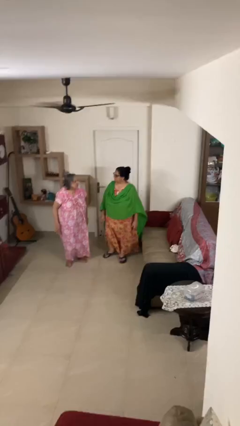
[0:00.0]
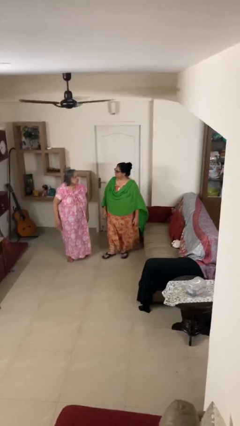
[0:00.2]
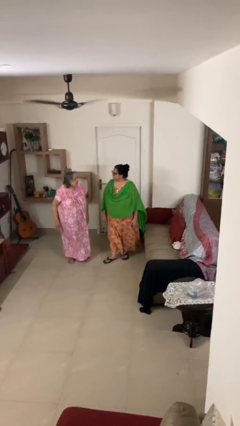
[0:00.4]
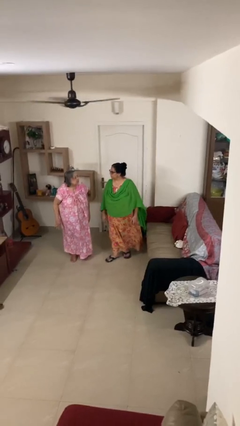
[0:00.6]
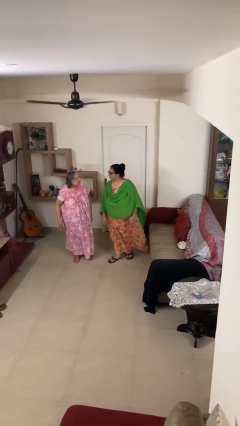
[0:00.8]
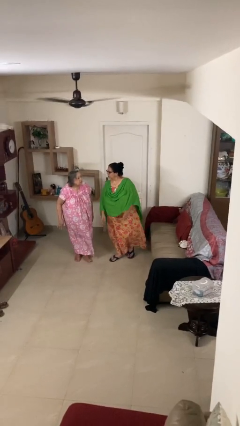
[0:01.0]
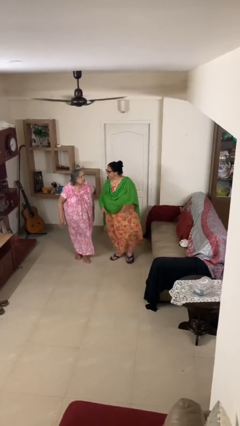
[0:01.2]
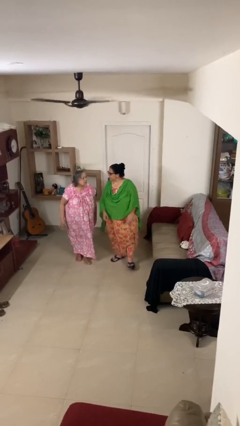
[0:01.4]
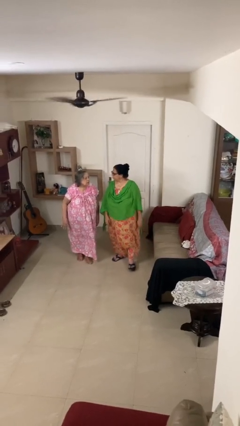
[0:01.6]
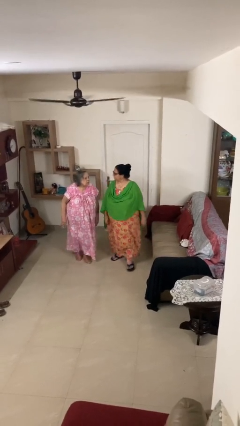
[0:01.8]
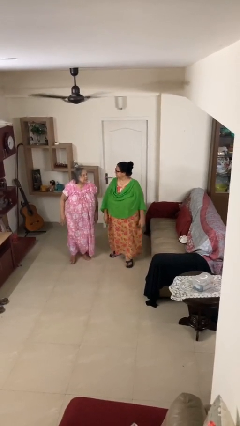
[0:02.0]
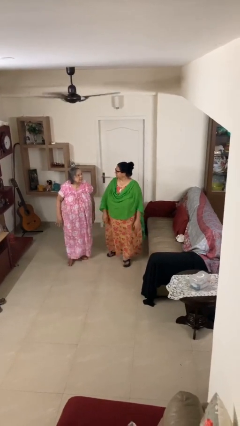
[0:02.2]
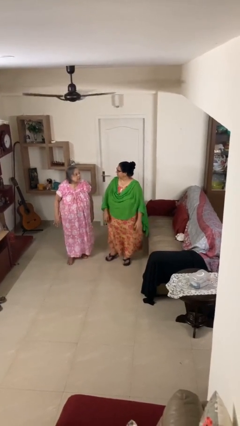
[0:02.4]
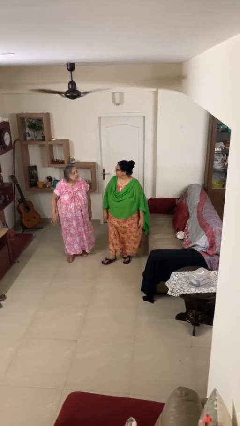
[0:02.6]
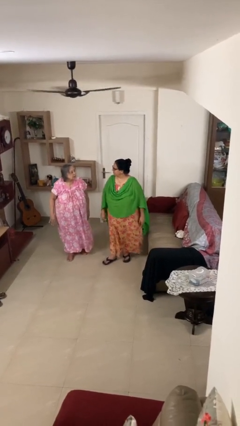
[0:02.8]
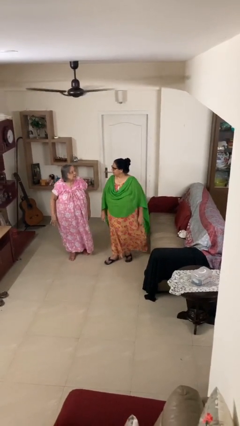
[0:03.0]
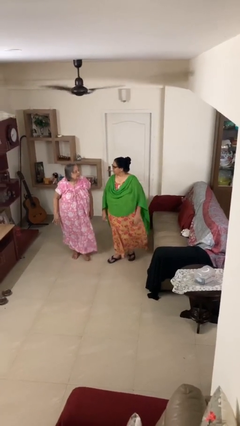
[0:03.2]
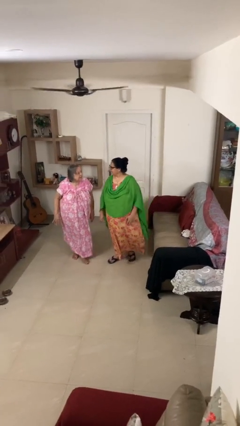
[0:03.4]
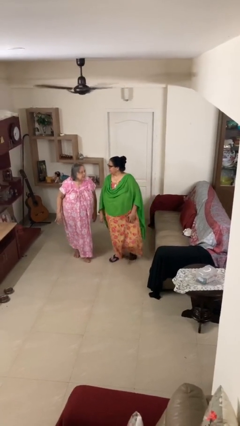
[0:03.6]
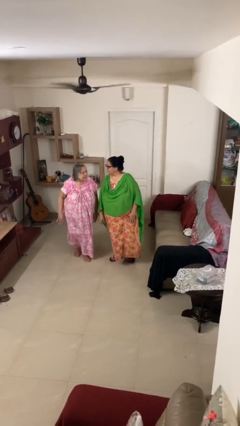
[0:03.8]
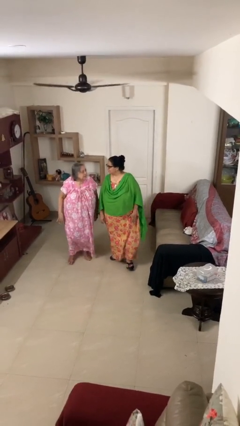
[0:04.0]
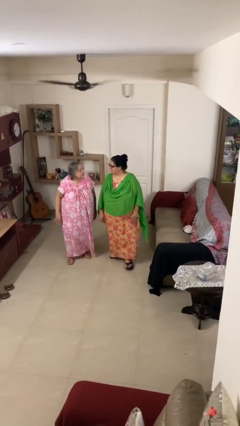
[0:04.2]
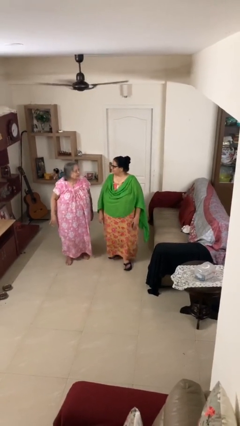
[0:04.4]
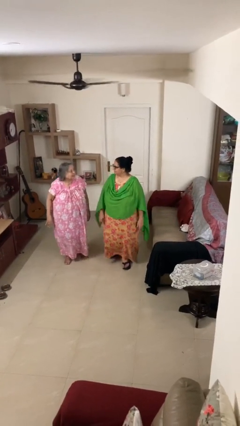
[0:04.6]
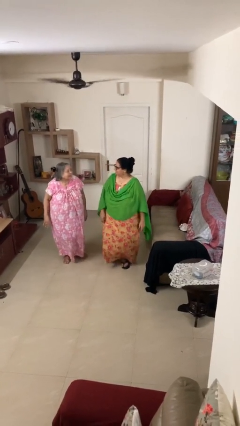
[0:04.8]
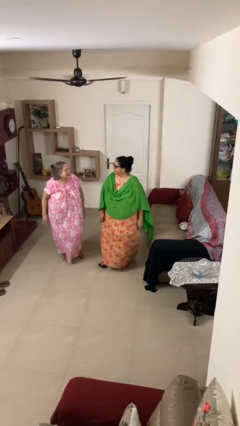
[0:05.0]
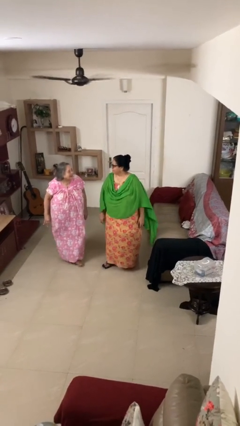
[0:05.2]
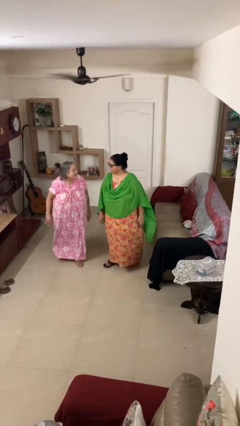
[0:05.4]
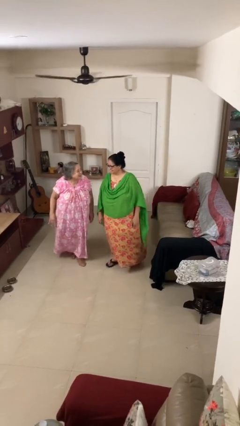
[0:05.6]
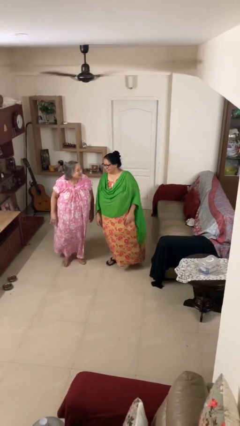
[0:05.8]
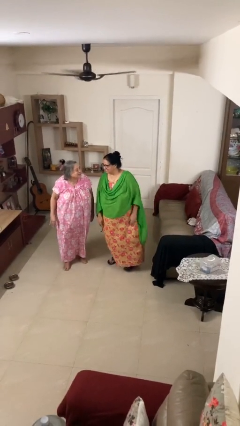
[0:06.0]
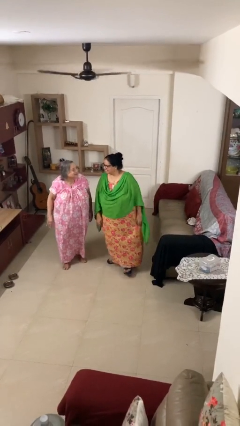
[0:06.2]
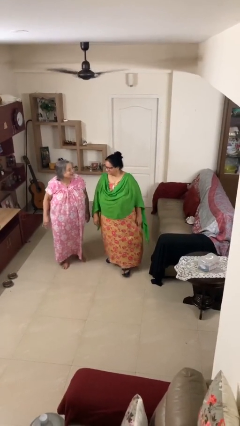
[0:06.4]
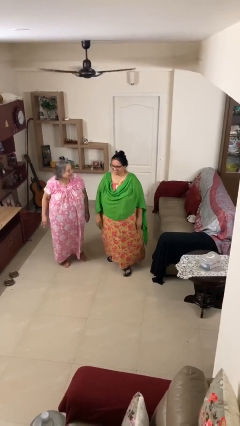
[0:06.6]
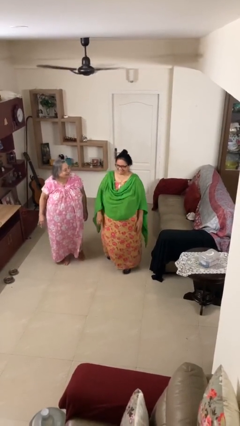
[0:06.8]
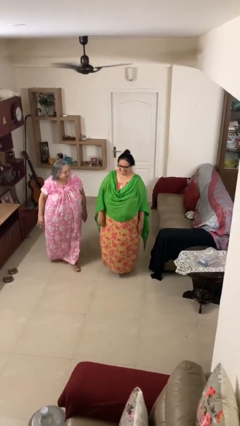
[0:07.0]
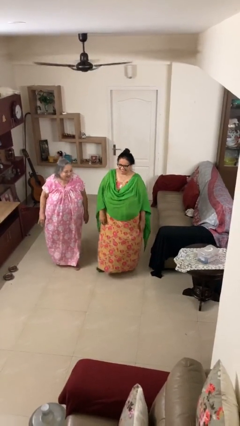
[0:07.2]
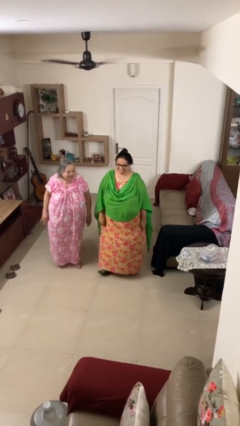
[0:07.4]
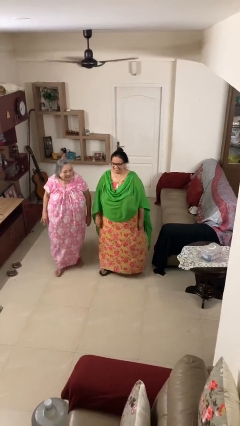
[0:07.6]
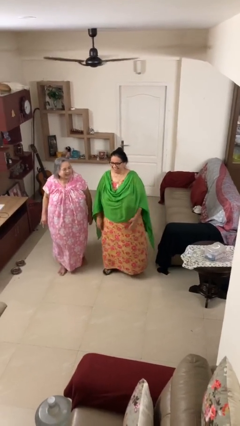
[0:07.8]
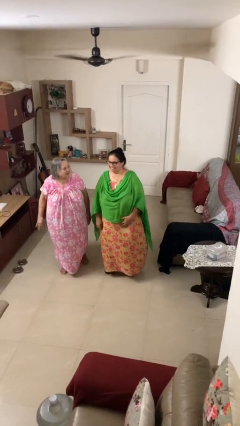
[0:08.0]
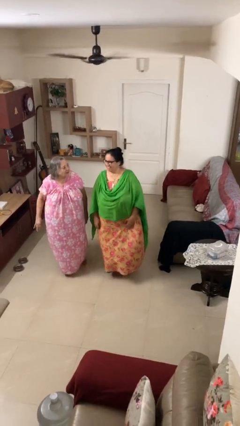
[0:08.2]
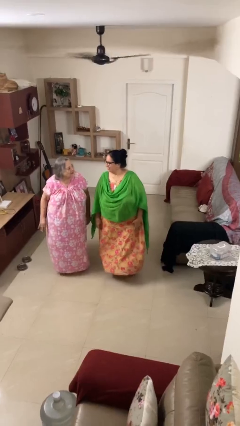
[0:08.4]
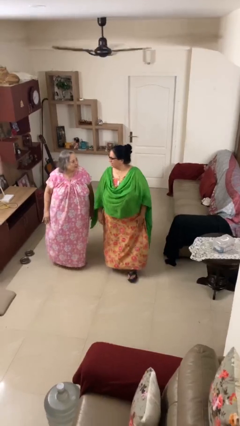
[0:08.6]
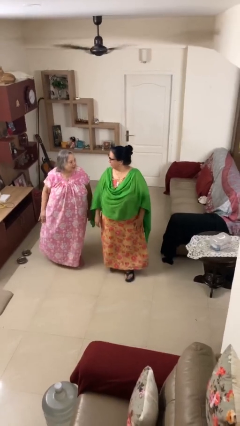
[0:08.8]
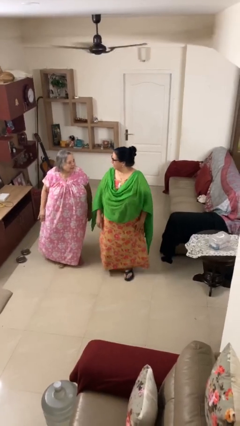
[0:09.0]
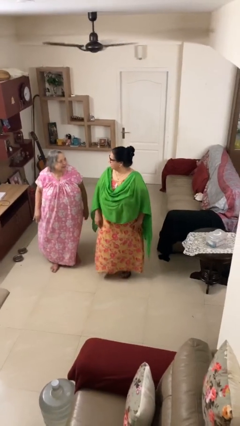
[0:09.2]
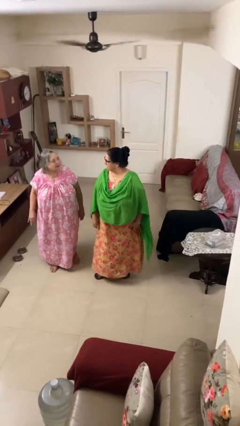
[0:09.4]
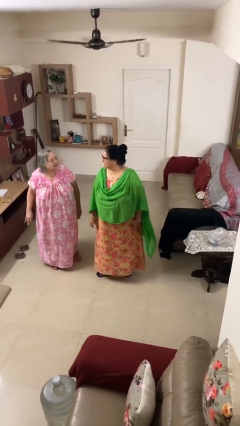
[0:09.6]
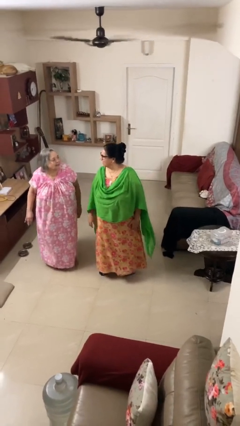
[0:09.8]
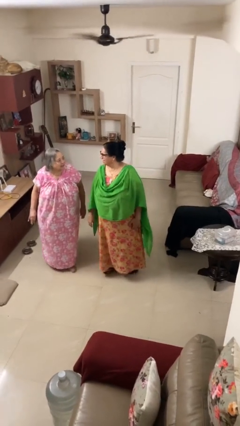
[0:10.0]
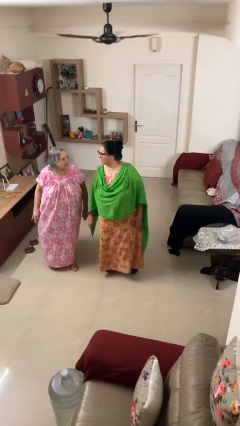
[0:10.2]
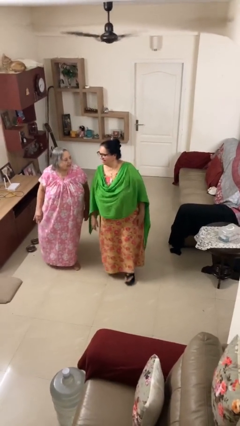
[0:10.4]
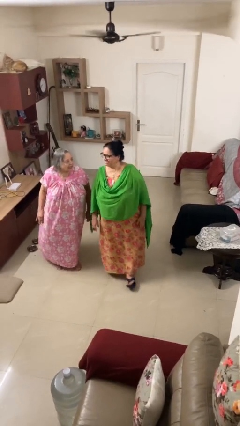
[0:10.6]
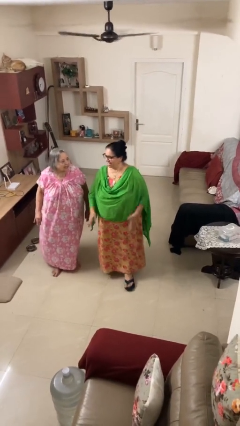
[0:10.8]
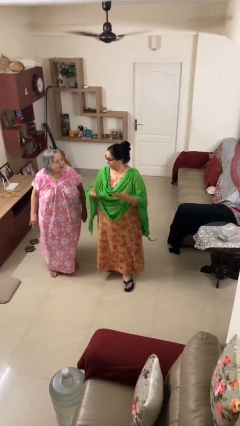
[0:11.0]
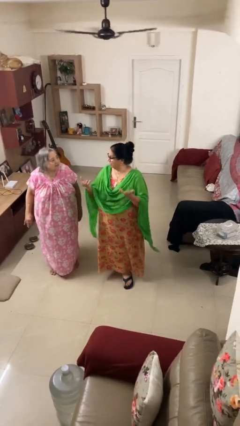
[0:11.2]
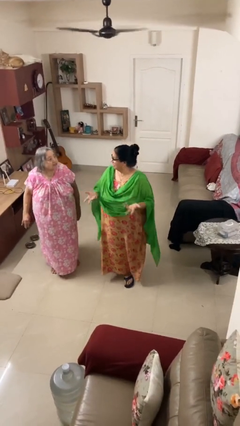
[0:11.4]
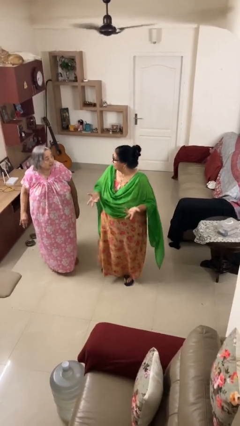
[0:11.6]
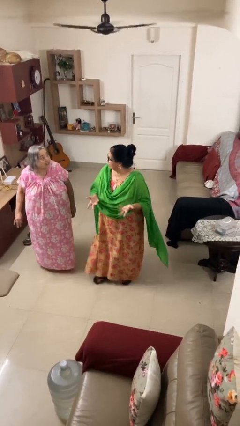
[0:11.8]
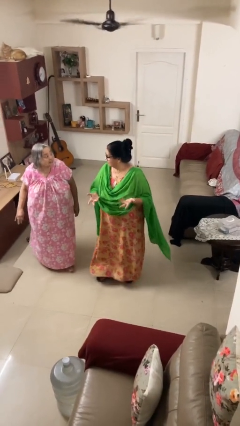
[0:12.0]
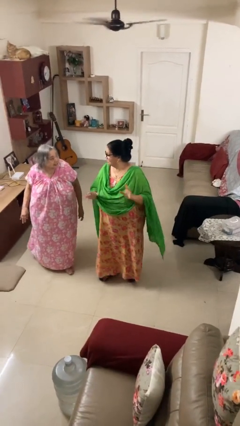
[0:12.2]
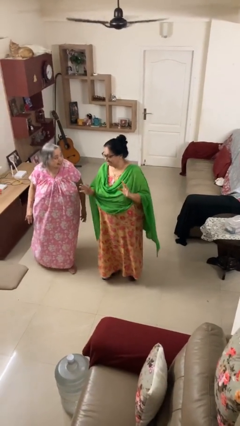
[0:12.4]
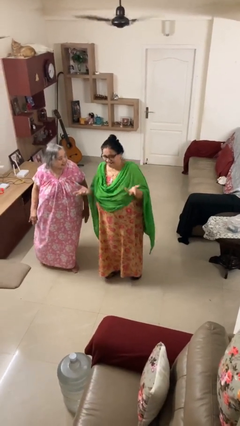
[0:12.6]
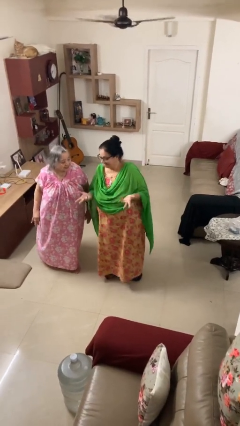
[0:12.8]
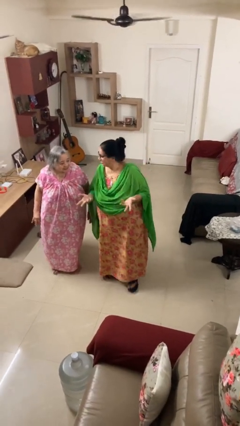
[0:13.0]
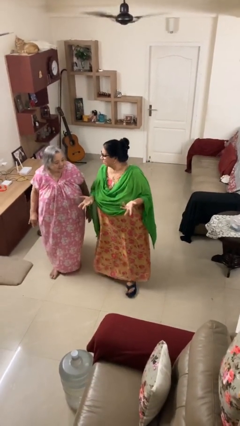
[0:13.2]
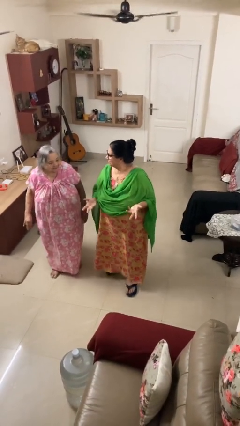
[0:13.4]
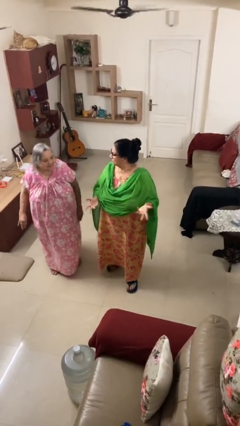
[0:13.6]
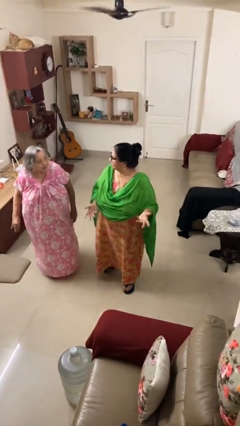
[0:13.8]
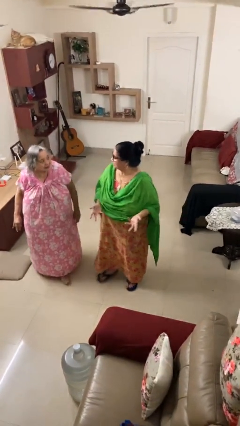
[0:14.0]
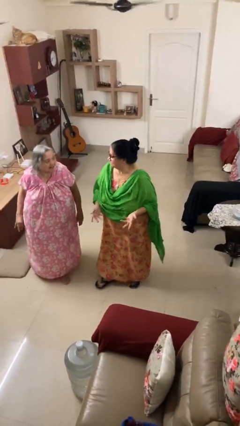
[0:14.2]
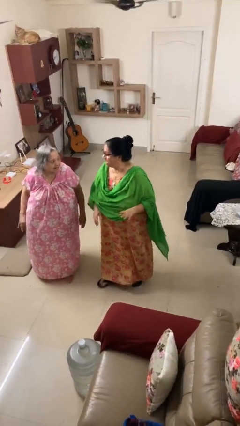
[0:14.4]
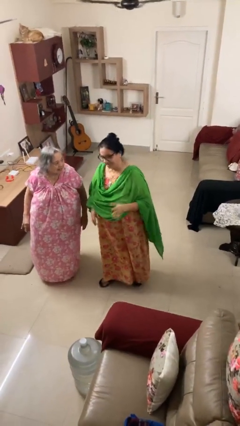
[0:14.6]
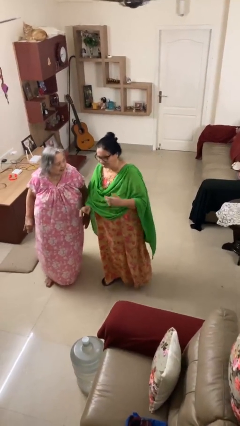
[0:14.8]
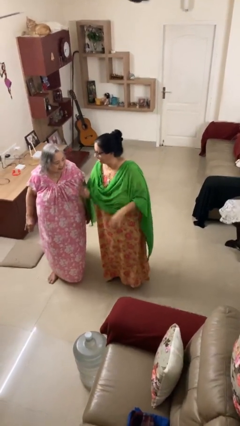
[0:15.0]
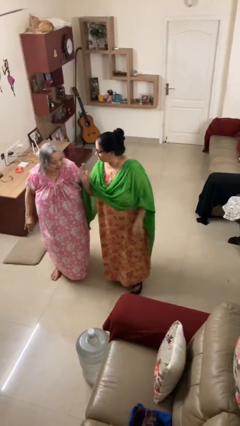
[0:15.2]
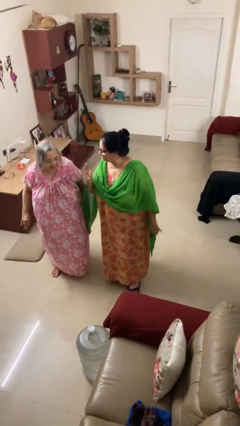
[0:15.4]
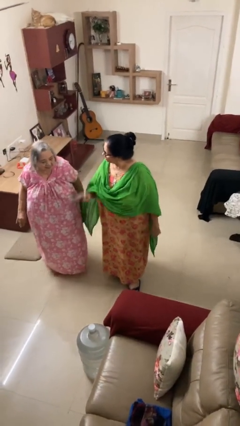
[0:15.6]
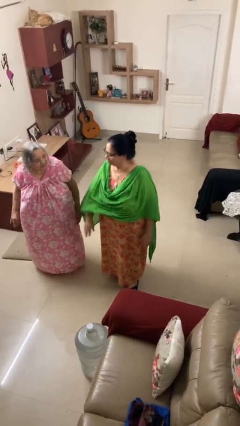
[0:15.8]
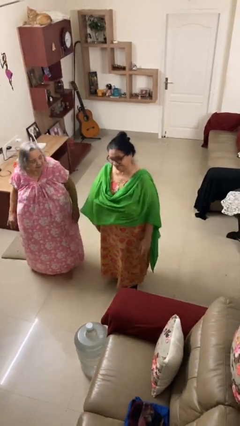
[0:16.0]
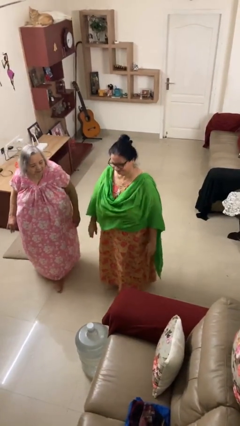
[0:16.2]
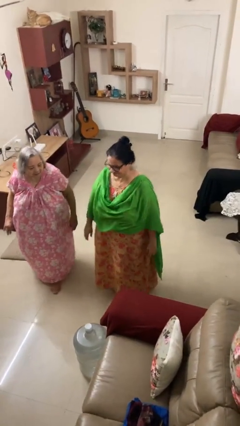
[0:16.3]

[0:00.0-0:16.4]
person talks to person

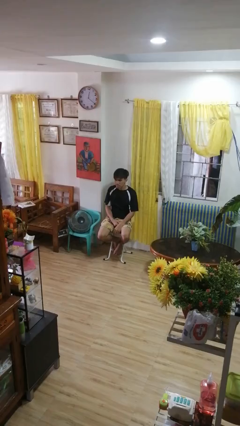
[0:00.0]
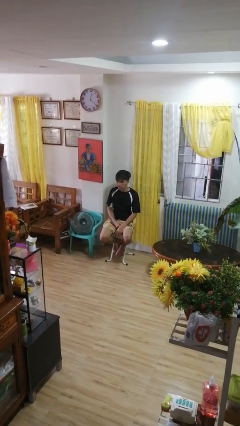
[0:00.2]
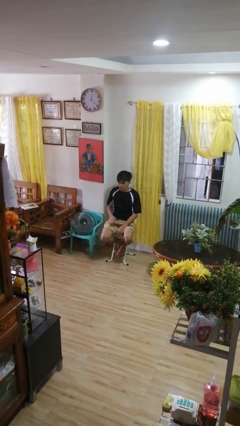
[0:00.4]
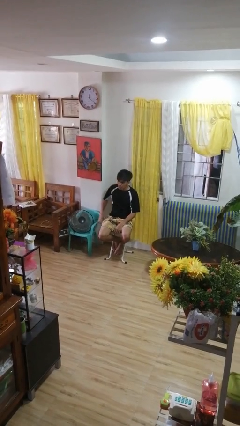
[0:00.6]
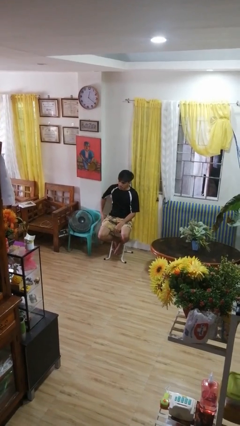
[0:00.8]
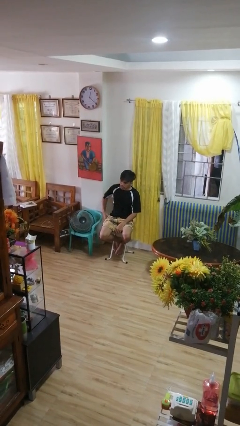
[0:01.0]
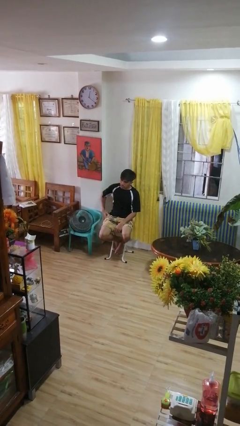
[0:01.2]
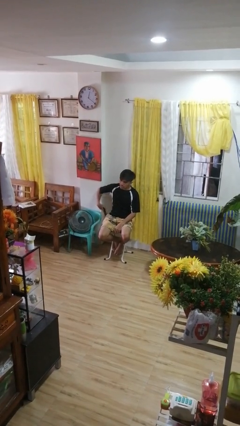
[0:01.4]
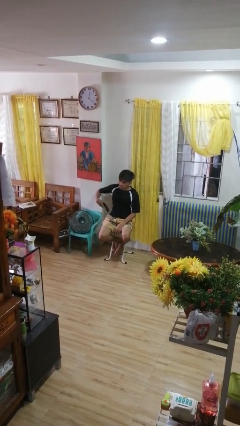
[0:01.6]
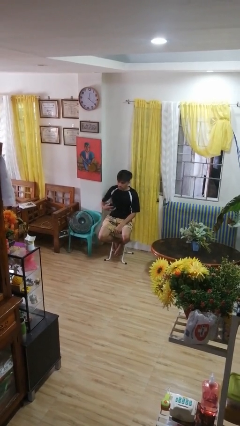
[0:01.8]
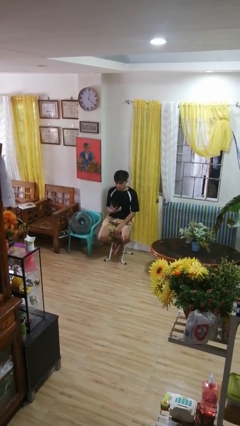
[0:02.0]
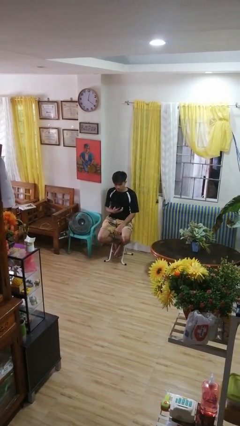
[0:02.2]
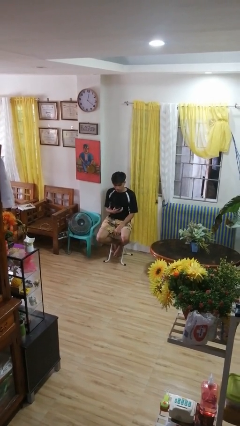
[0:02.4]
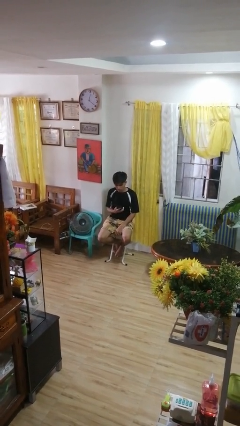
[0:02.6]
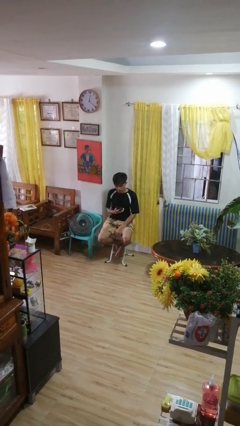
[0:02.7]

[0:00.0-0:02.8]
person takes phone from pocket
